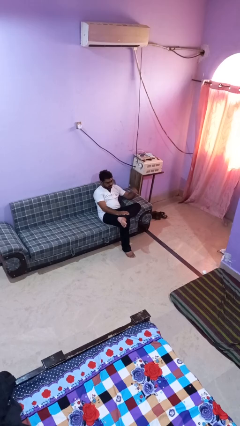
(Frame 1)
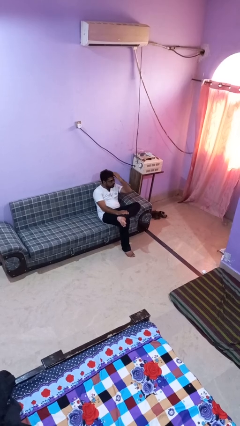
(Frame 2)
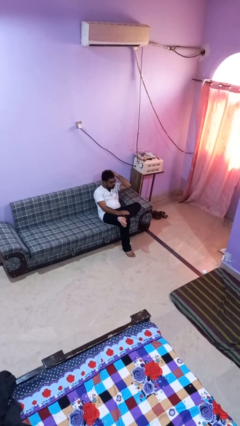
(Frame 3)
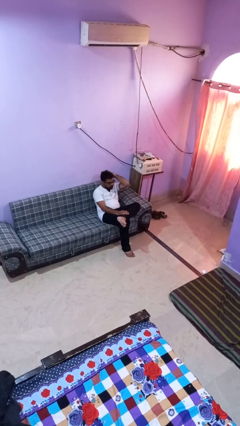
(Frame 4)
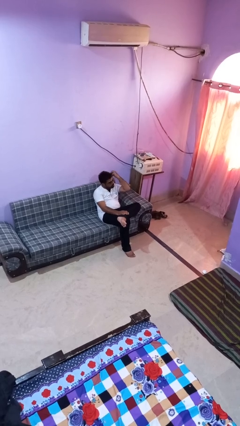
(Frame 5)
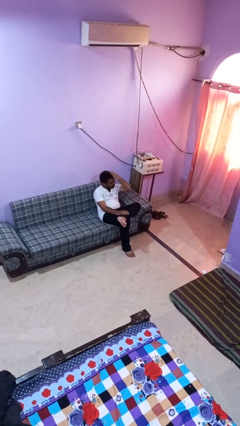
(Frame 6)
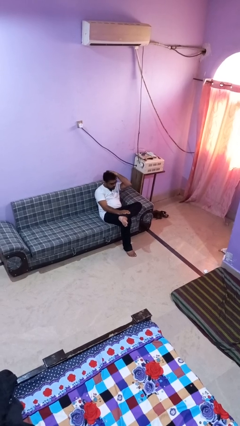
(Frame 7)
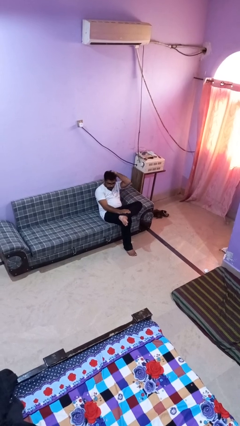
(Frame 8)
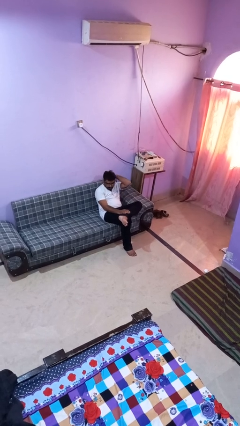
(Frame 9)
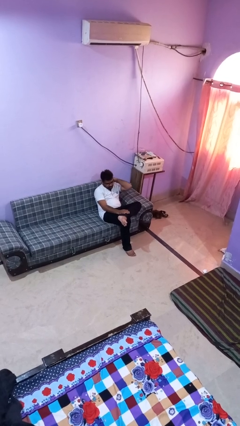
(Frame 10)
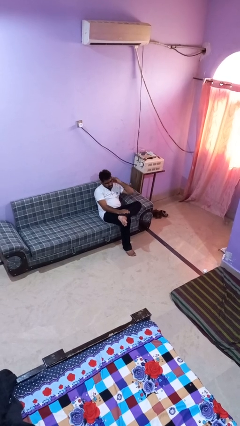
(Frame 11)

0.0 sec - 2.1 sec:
person strokes hair

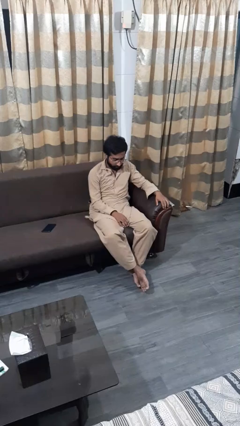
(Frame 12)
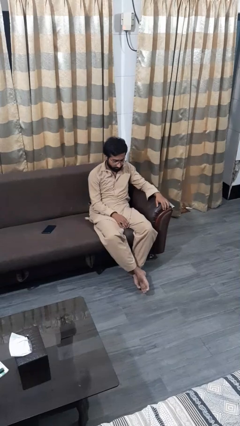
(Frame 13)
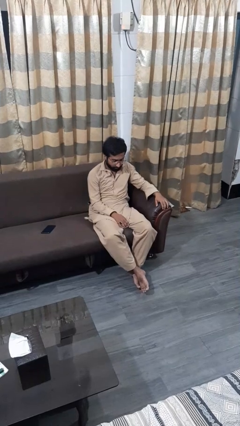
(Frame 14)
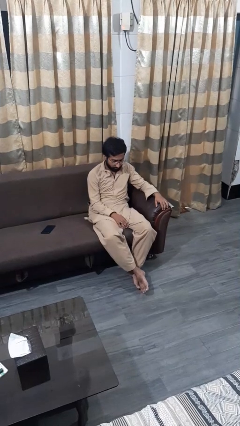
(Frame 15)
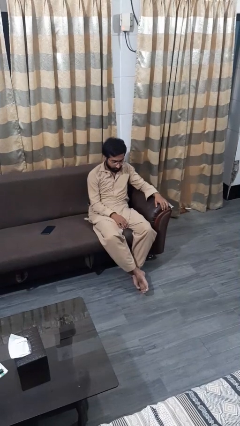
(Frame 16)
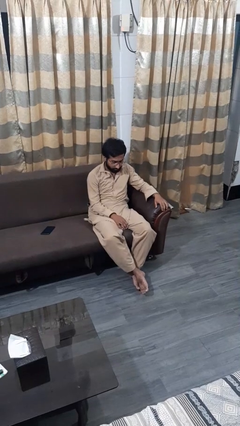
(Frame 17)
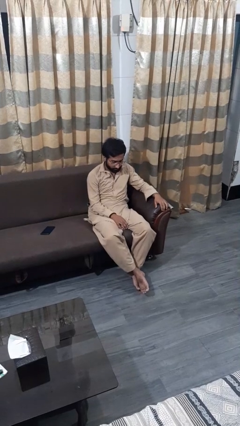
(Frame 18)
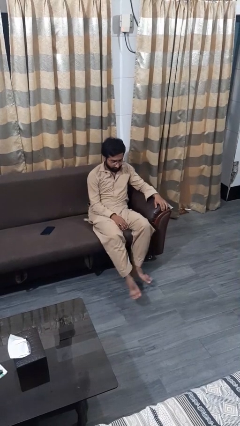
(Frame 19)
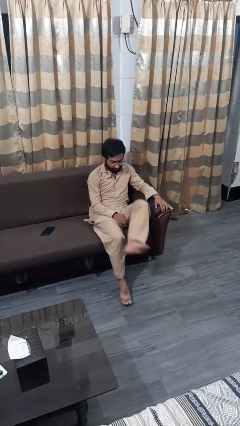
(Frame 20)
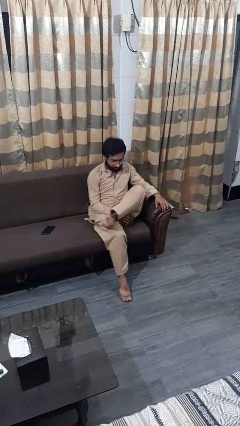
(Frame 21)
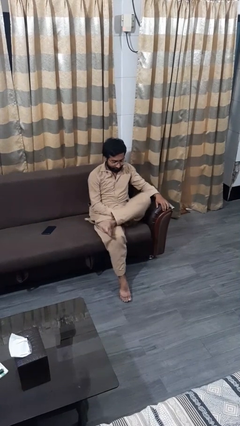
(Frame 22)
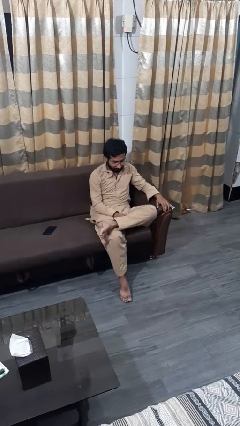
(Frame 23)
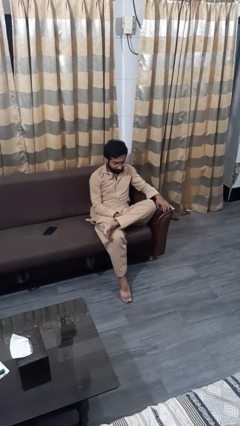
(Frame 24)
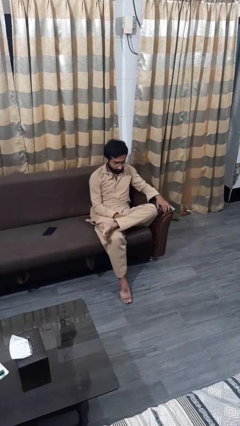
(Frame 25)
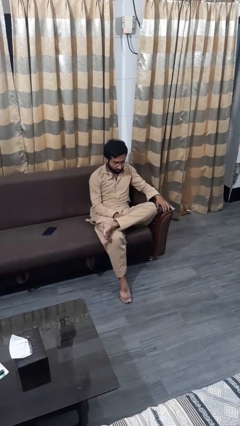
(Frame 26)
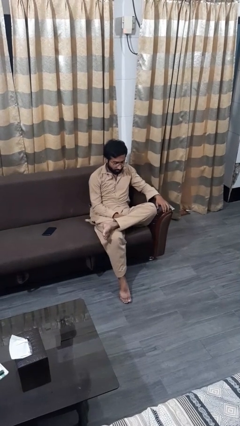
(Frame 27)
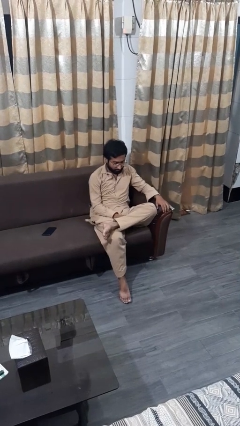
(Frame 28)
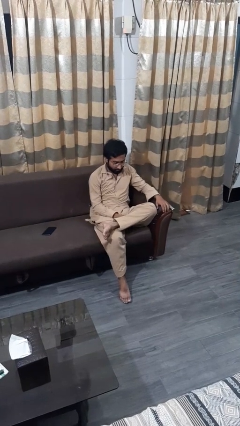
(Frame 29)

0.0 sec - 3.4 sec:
person crosses legs

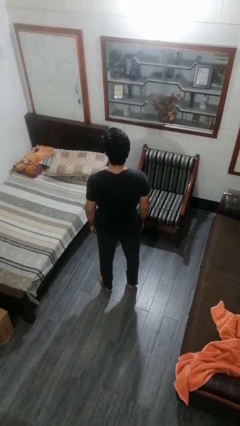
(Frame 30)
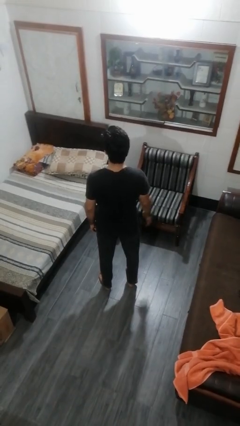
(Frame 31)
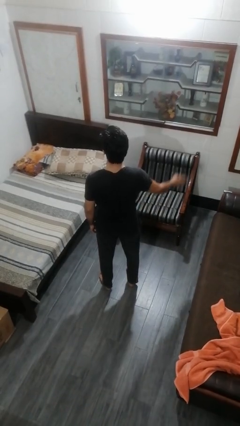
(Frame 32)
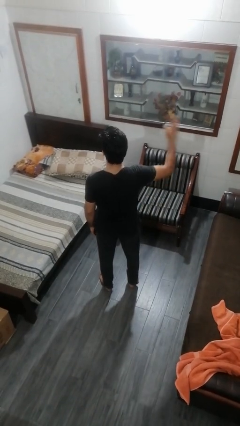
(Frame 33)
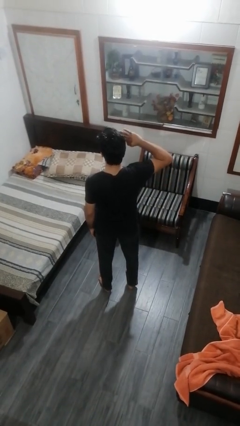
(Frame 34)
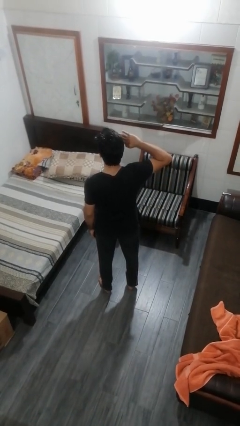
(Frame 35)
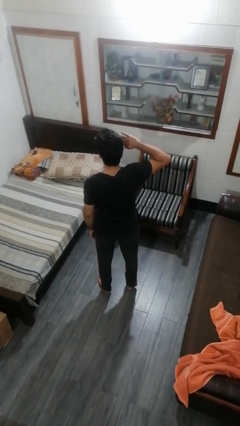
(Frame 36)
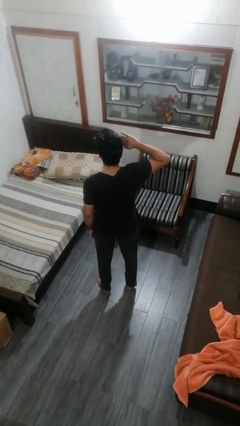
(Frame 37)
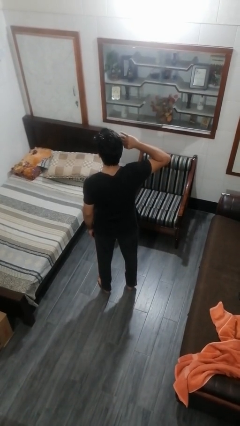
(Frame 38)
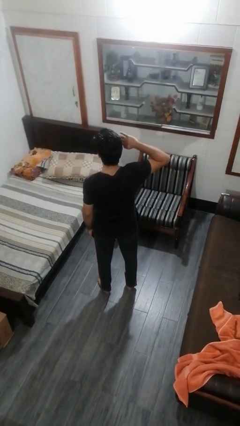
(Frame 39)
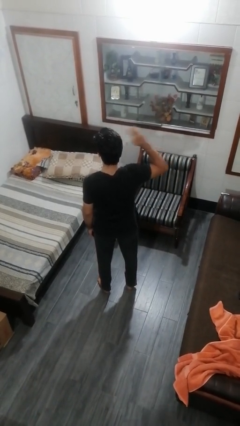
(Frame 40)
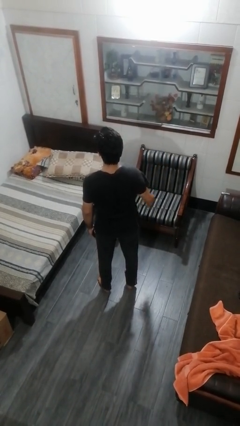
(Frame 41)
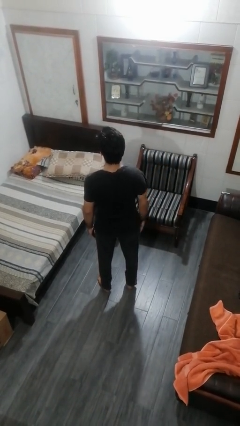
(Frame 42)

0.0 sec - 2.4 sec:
person salutes

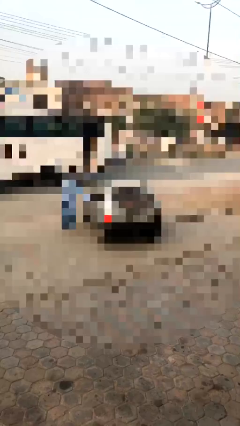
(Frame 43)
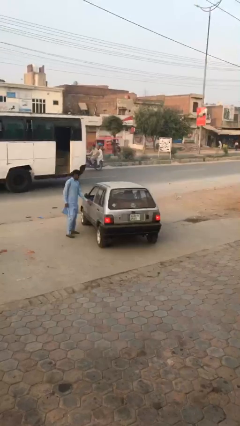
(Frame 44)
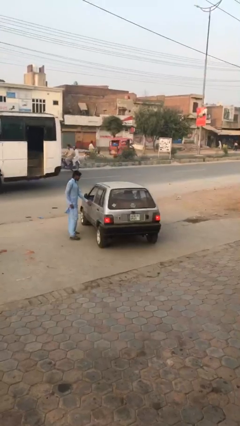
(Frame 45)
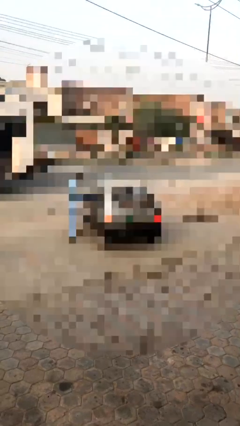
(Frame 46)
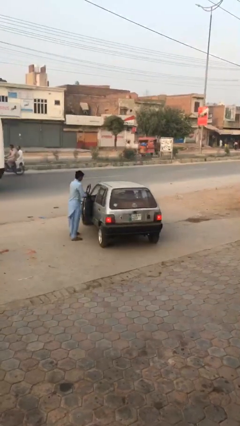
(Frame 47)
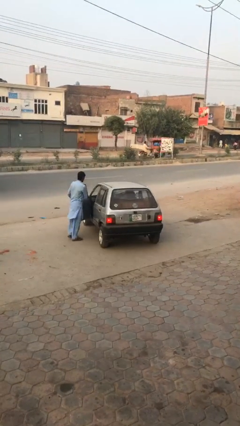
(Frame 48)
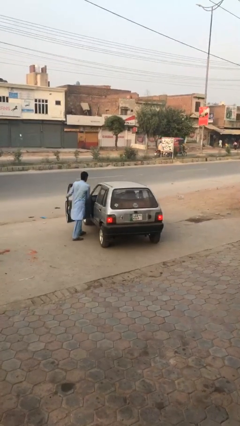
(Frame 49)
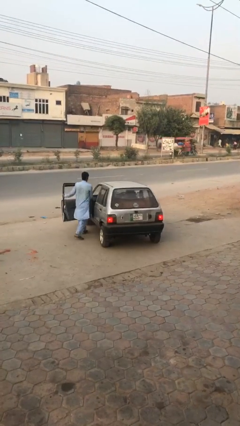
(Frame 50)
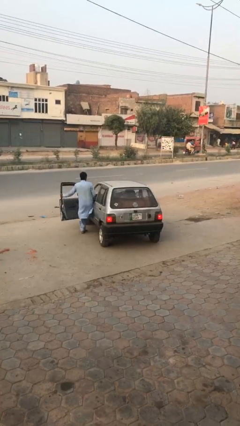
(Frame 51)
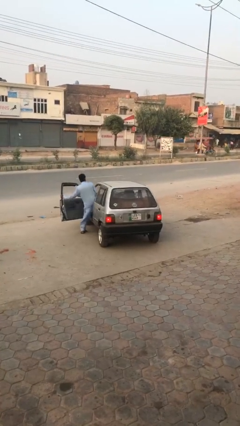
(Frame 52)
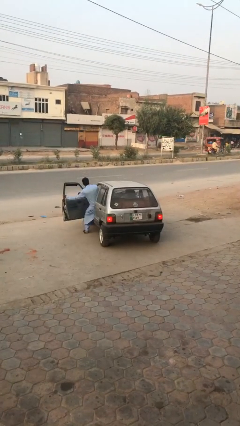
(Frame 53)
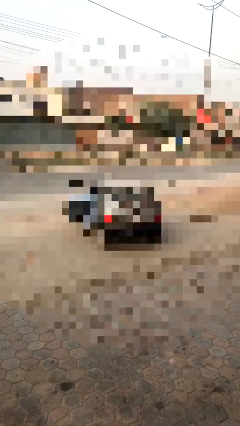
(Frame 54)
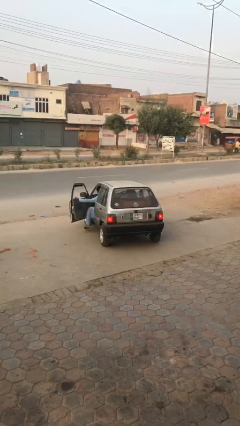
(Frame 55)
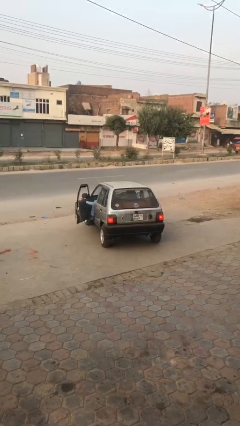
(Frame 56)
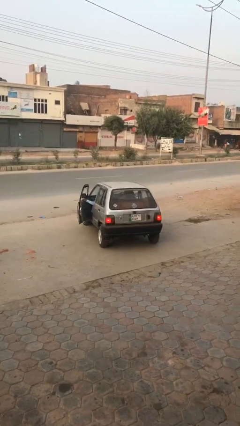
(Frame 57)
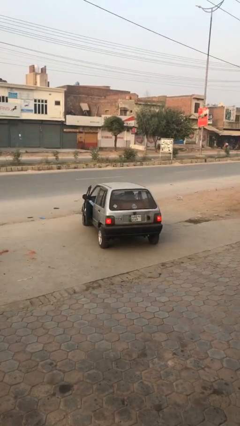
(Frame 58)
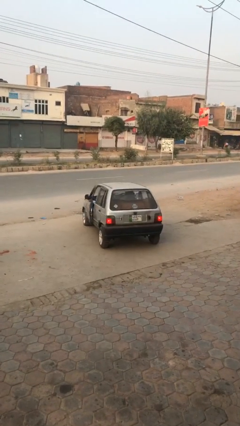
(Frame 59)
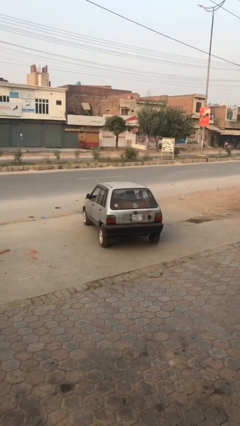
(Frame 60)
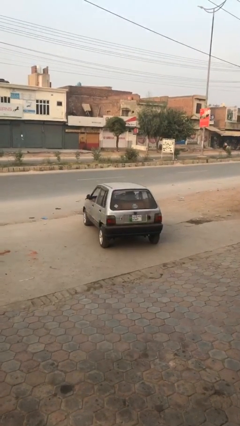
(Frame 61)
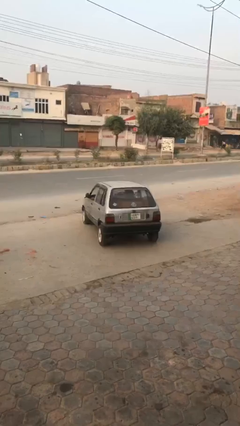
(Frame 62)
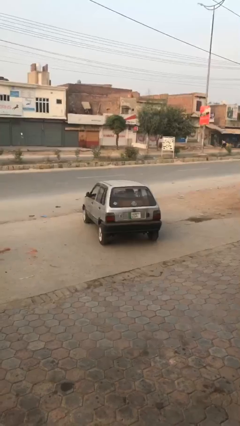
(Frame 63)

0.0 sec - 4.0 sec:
car picks up person

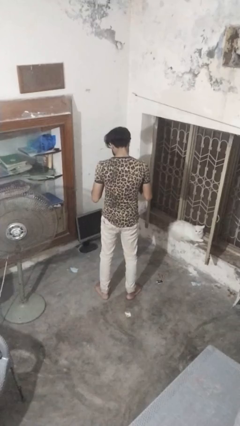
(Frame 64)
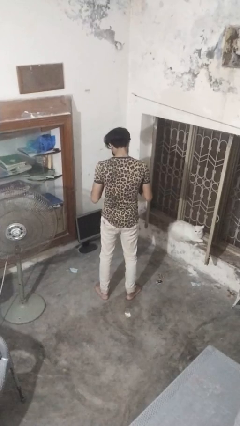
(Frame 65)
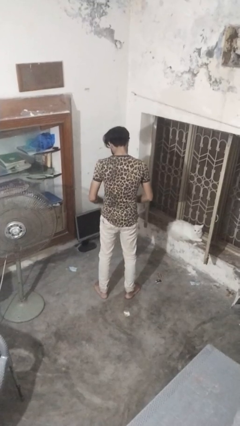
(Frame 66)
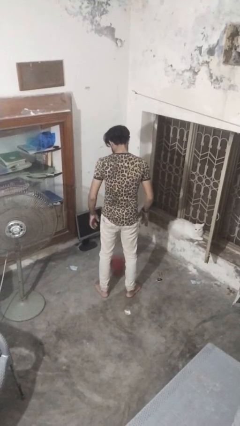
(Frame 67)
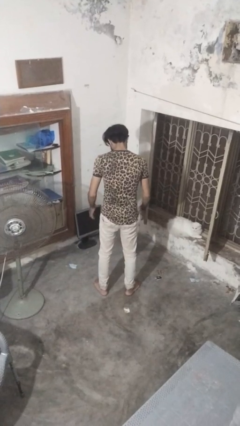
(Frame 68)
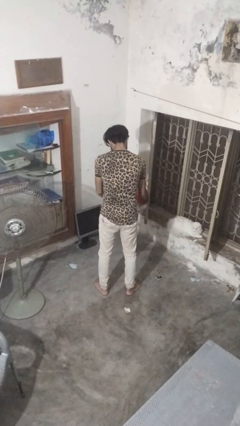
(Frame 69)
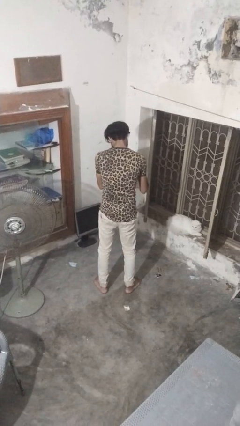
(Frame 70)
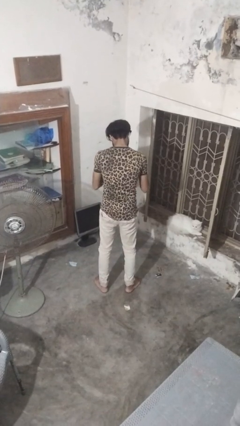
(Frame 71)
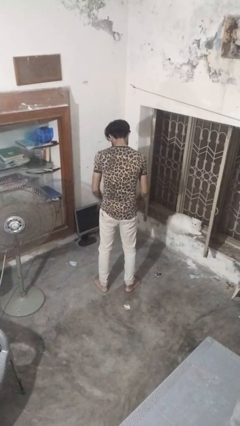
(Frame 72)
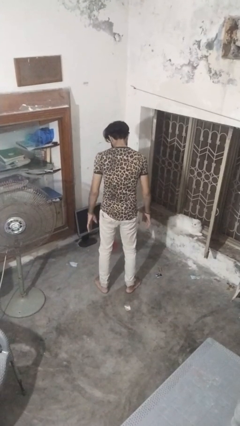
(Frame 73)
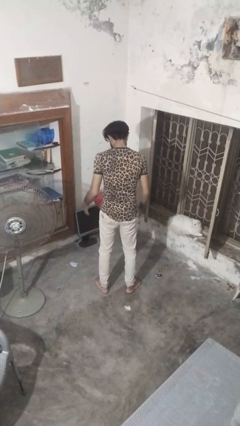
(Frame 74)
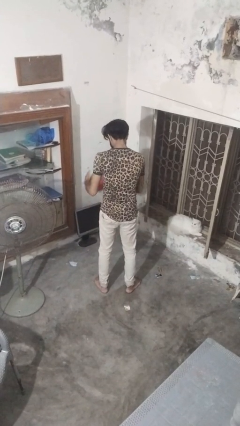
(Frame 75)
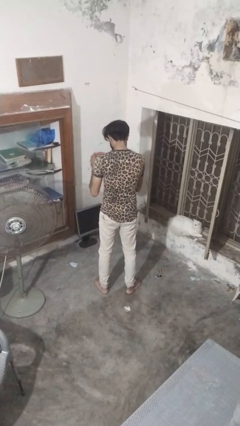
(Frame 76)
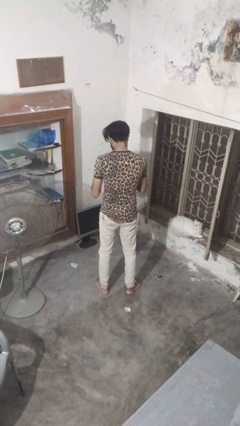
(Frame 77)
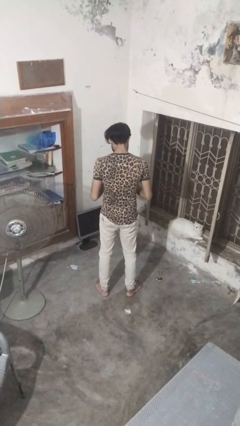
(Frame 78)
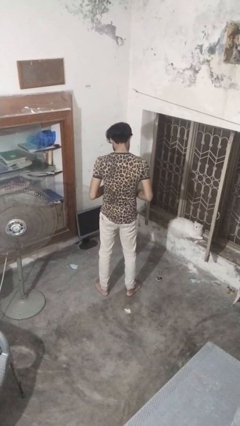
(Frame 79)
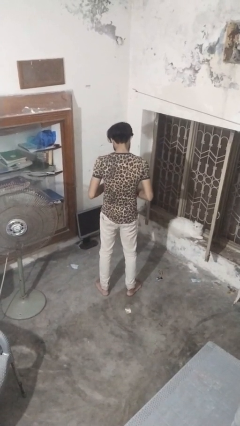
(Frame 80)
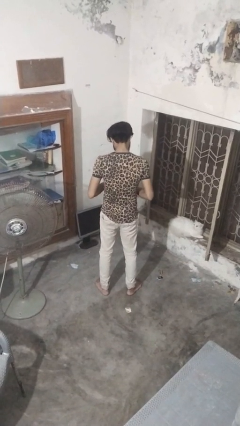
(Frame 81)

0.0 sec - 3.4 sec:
person bounces ball on floor

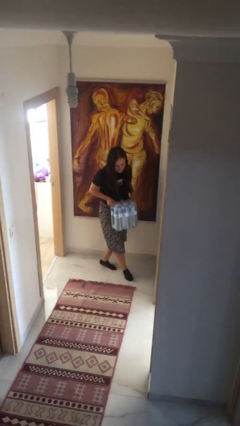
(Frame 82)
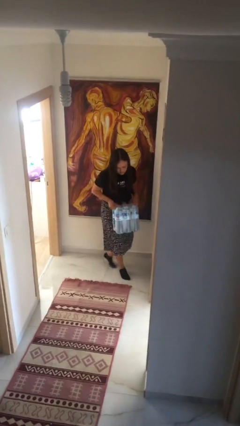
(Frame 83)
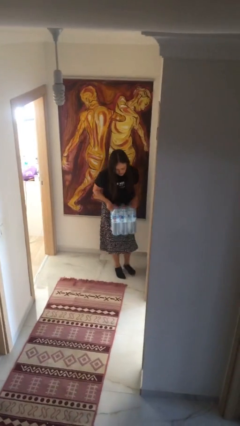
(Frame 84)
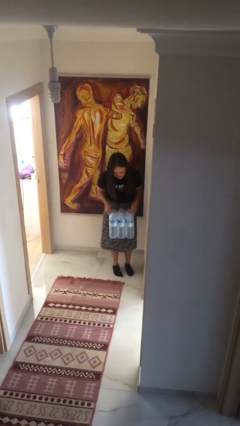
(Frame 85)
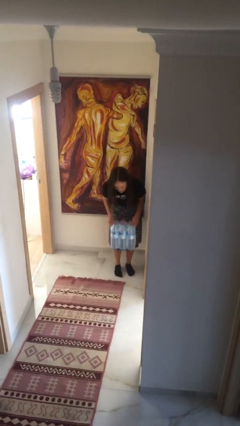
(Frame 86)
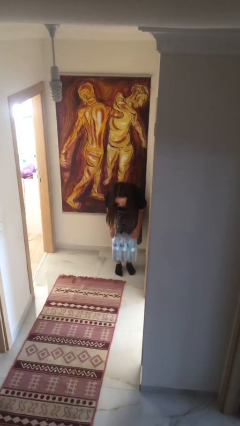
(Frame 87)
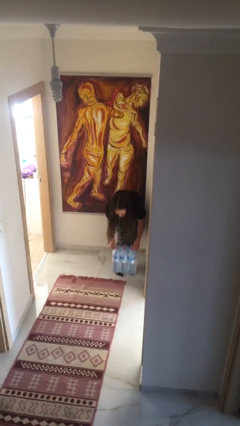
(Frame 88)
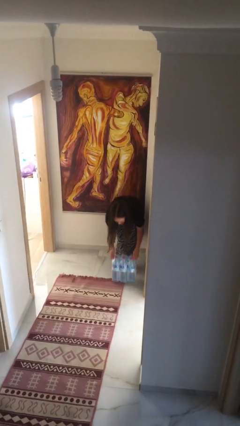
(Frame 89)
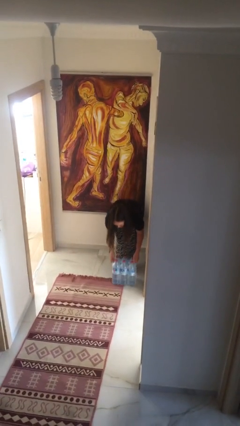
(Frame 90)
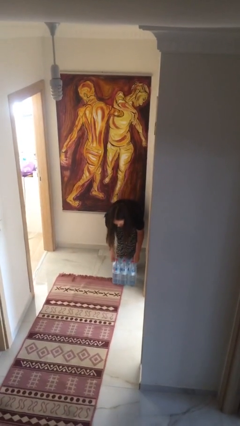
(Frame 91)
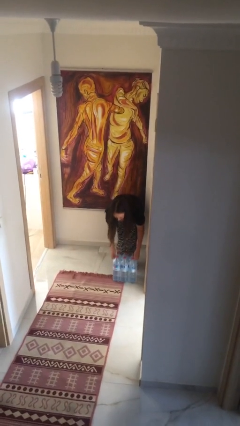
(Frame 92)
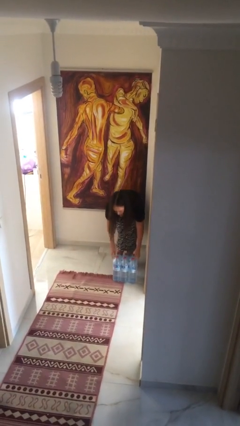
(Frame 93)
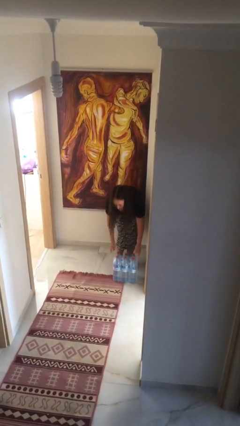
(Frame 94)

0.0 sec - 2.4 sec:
person puts down object on floor
